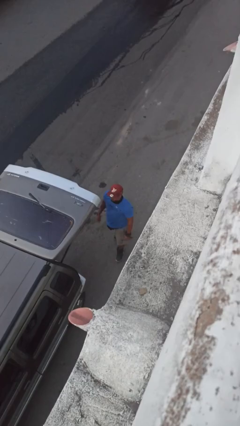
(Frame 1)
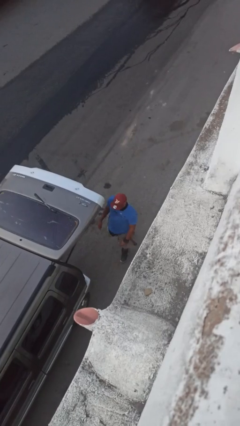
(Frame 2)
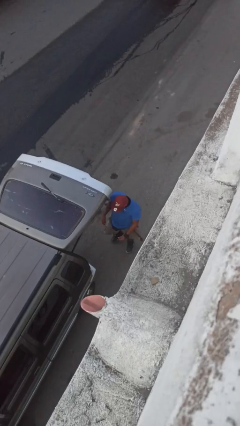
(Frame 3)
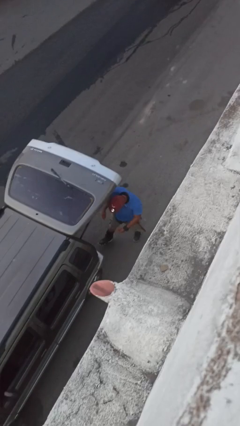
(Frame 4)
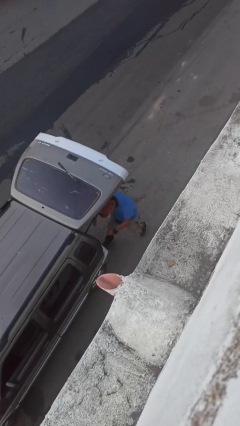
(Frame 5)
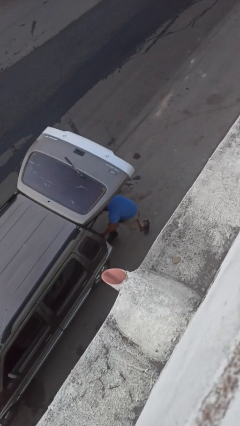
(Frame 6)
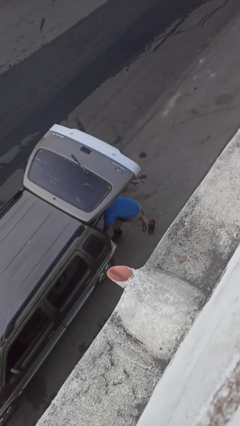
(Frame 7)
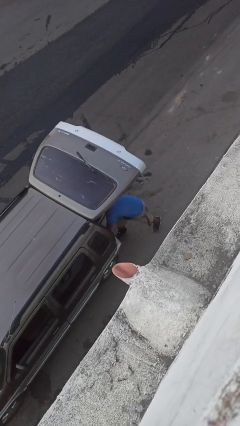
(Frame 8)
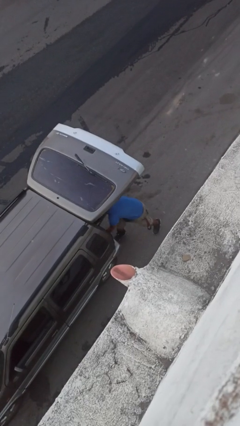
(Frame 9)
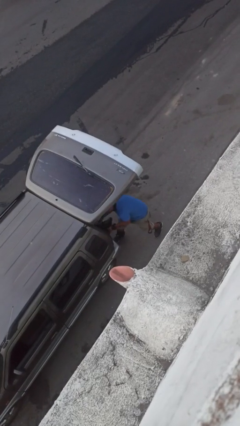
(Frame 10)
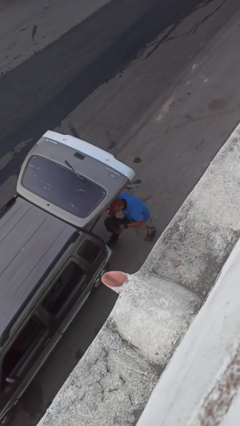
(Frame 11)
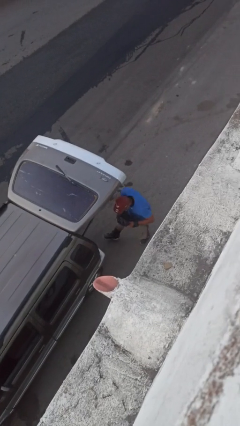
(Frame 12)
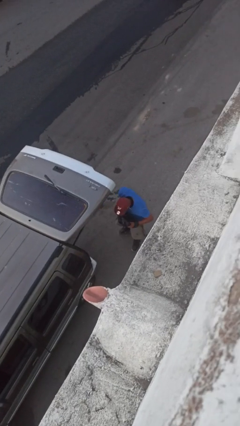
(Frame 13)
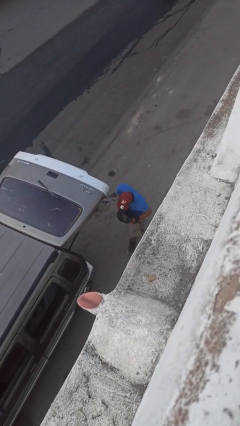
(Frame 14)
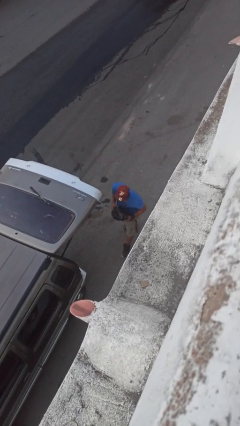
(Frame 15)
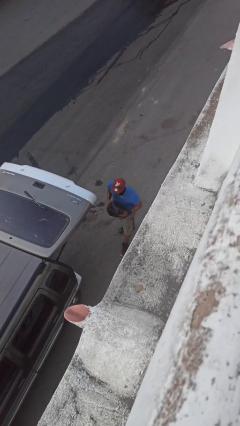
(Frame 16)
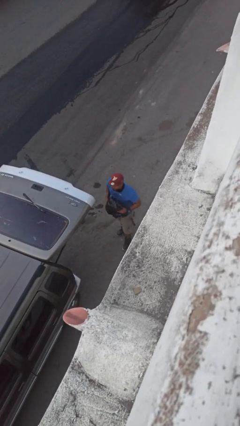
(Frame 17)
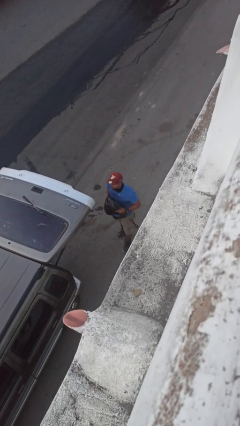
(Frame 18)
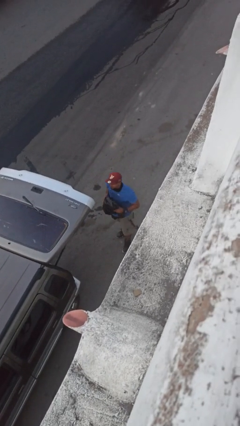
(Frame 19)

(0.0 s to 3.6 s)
person unloads car

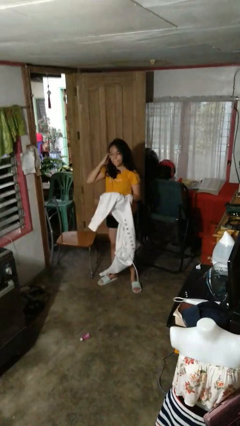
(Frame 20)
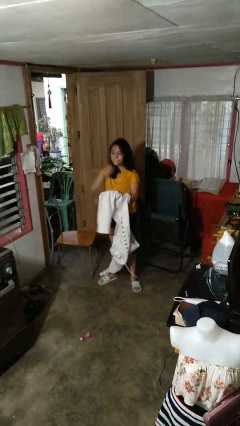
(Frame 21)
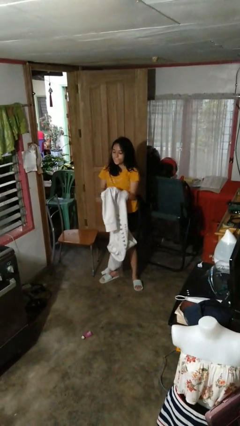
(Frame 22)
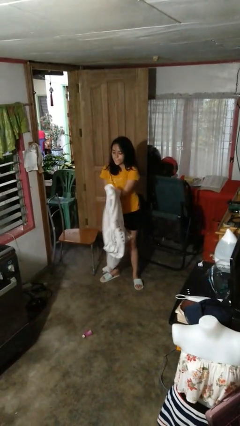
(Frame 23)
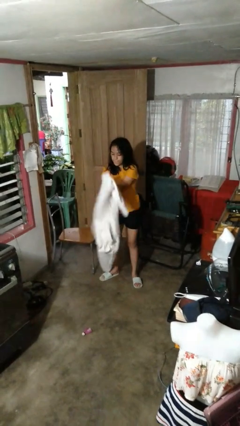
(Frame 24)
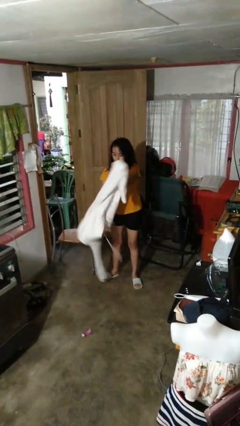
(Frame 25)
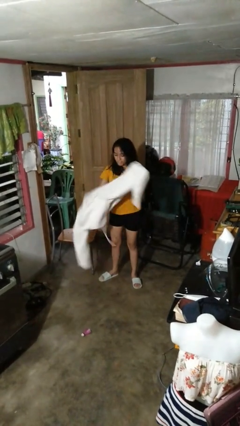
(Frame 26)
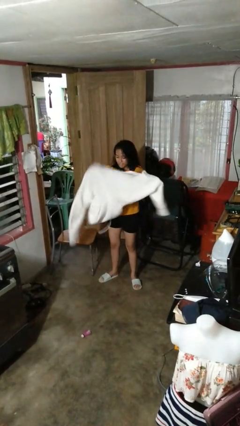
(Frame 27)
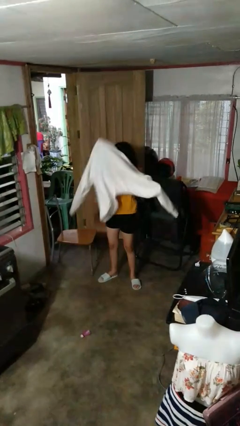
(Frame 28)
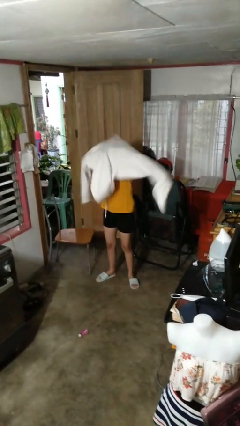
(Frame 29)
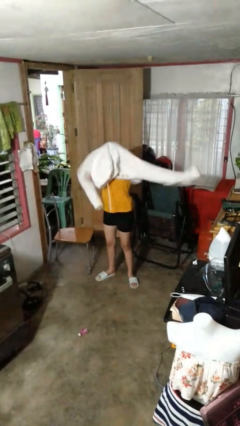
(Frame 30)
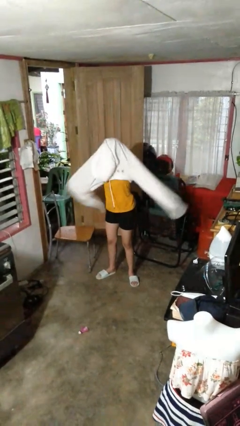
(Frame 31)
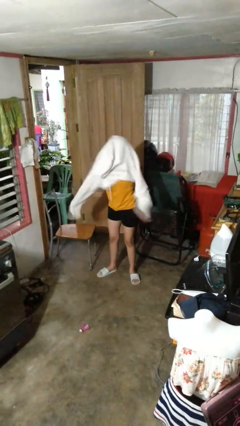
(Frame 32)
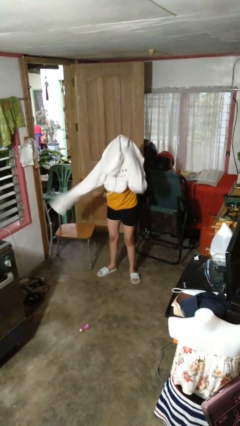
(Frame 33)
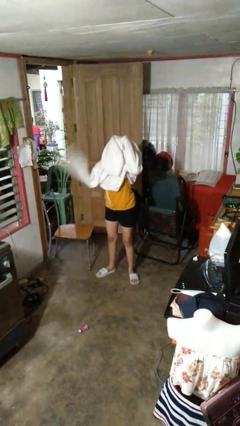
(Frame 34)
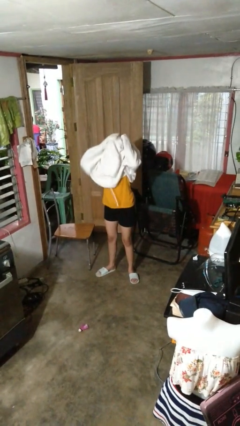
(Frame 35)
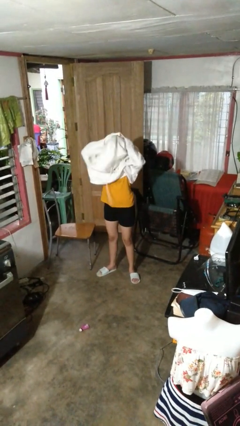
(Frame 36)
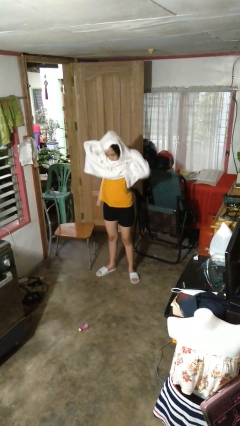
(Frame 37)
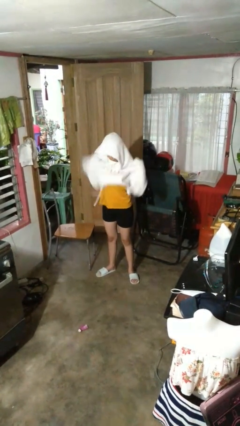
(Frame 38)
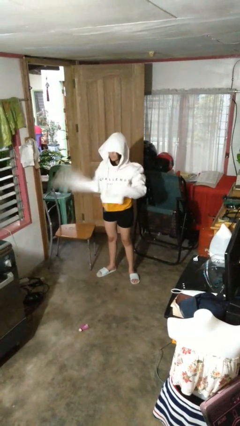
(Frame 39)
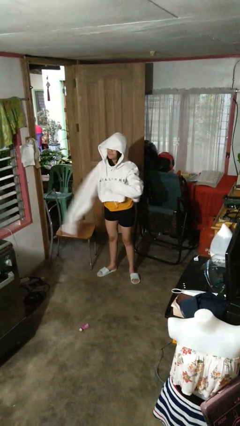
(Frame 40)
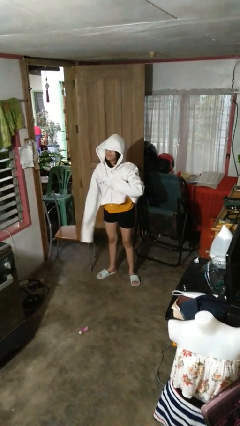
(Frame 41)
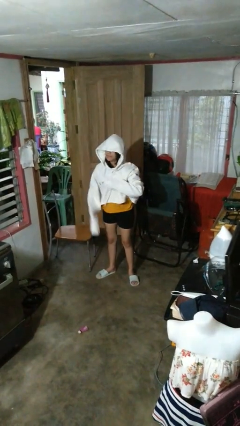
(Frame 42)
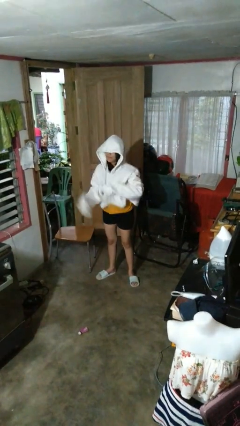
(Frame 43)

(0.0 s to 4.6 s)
person puts on hoodie

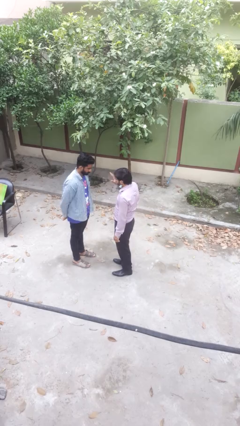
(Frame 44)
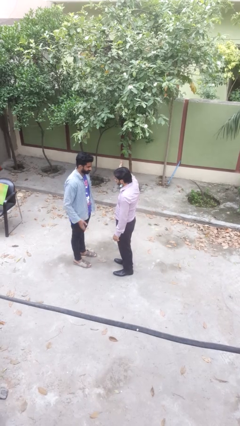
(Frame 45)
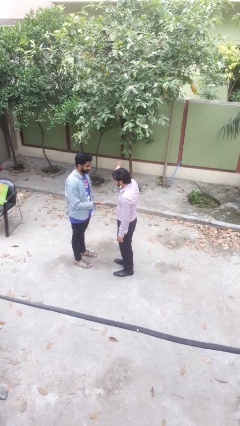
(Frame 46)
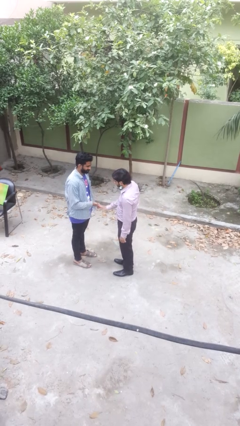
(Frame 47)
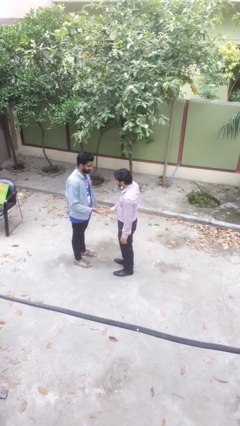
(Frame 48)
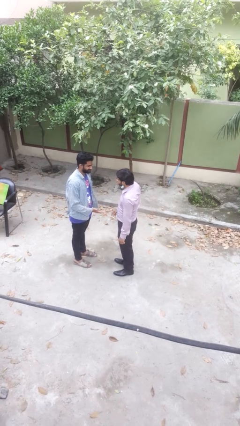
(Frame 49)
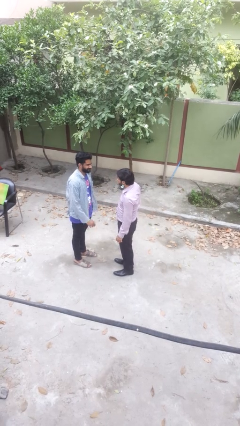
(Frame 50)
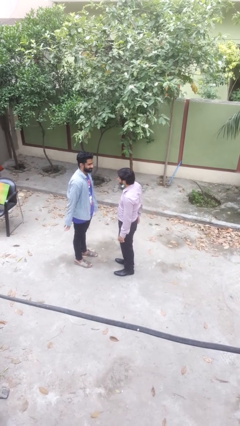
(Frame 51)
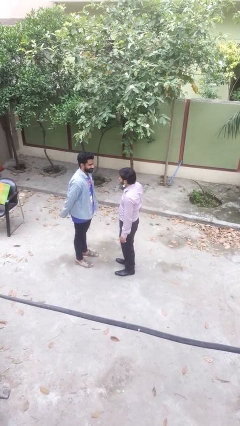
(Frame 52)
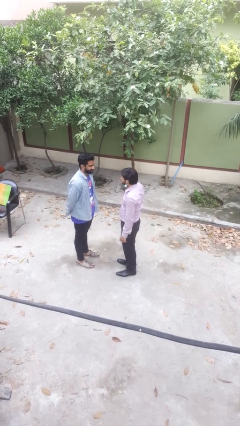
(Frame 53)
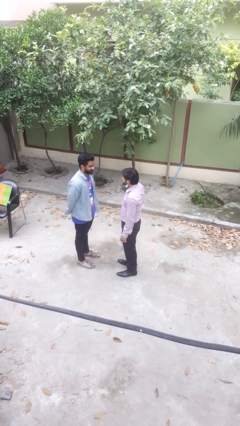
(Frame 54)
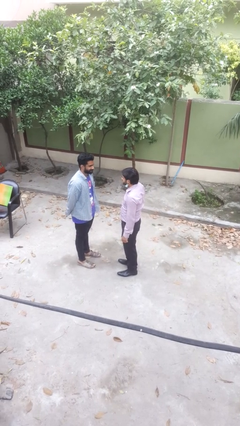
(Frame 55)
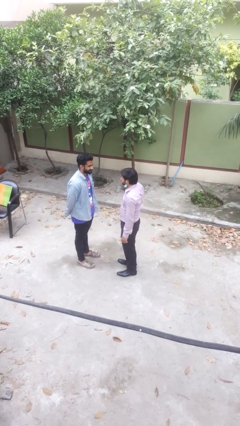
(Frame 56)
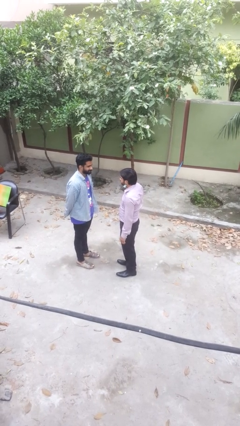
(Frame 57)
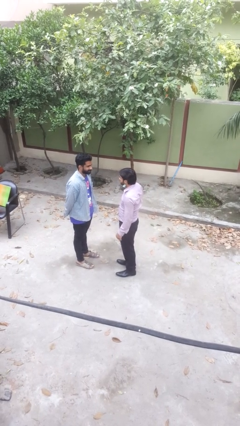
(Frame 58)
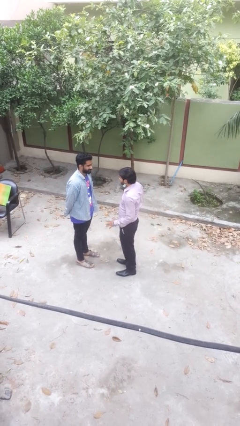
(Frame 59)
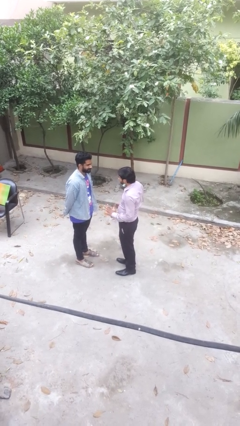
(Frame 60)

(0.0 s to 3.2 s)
person highfives hand

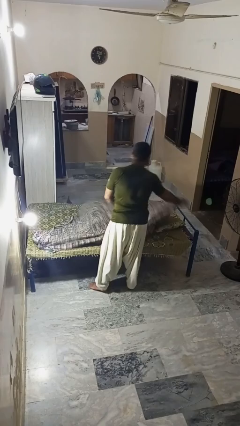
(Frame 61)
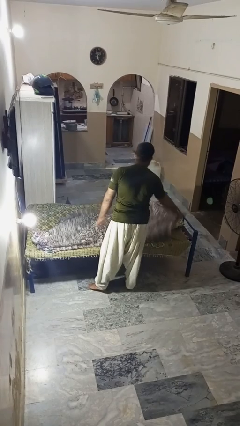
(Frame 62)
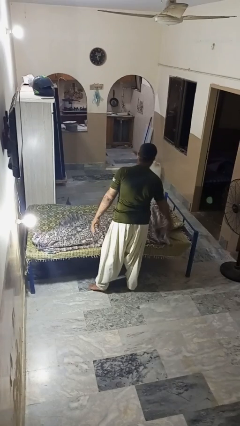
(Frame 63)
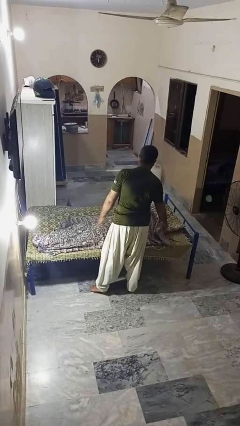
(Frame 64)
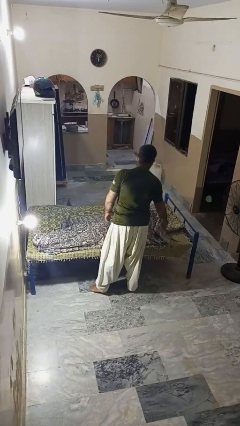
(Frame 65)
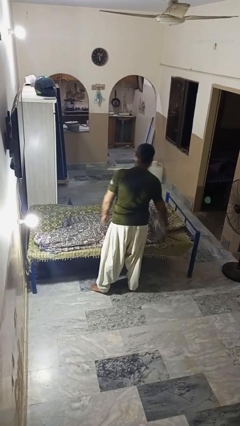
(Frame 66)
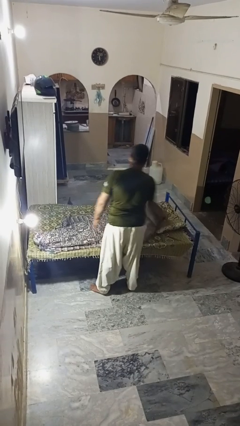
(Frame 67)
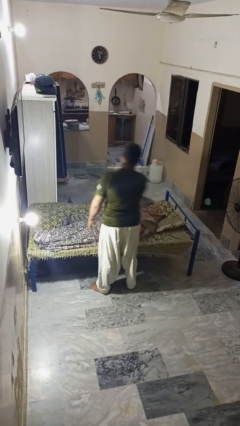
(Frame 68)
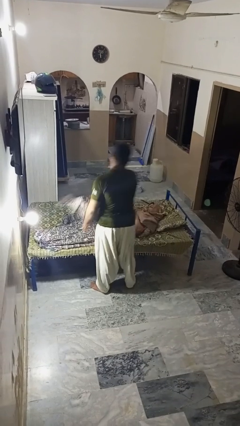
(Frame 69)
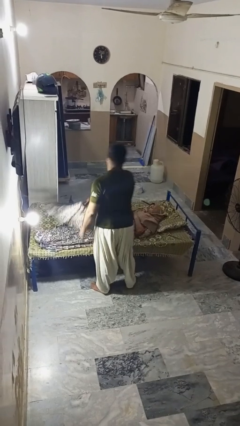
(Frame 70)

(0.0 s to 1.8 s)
person uncovers friend with blanket

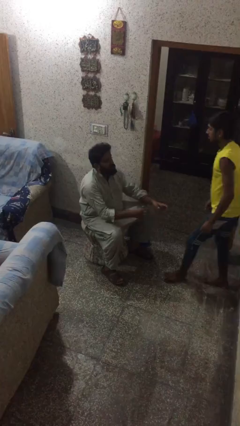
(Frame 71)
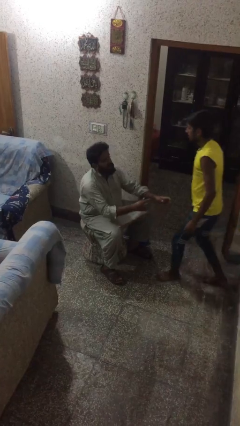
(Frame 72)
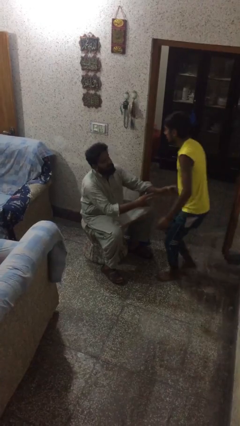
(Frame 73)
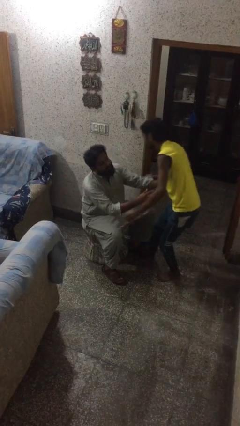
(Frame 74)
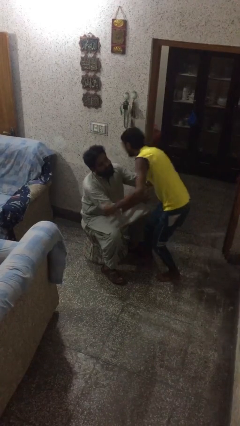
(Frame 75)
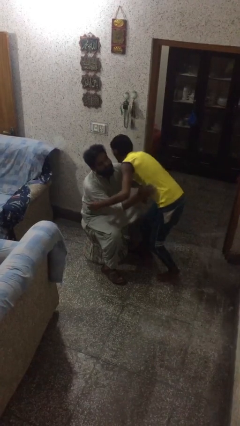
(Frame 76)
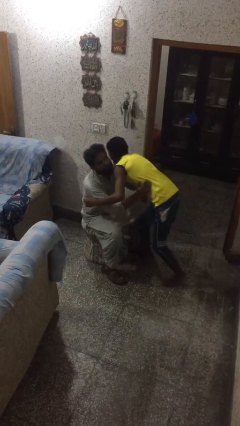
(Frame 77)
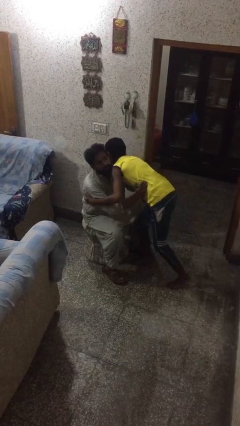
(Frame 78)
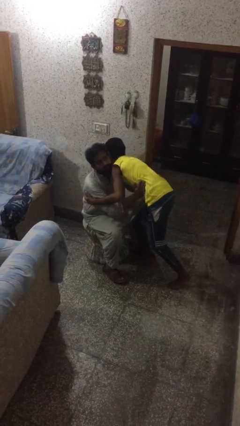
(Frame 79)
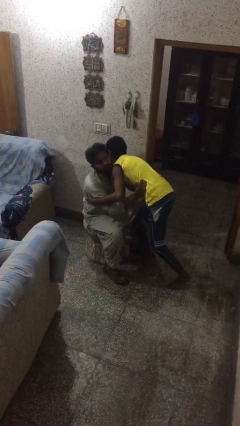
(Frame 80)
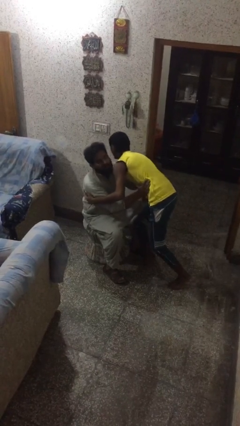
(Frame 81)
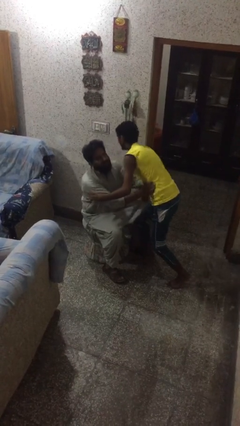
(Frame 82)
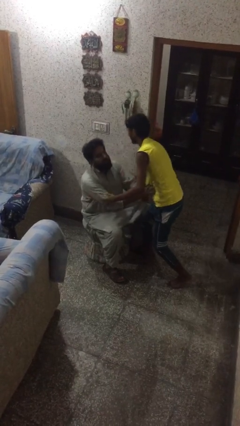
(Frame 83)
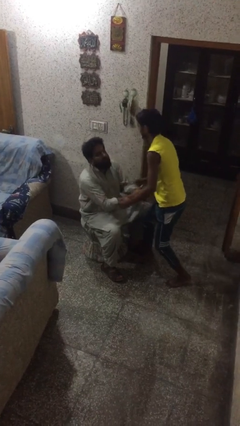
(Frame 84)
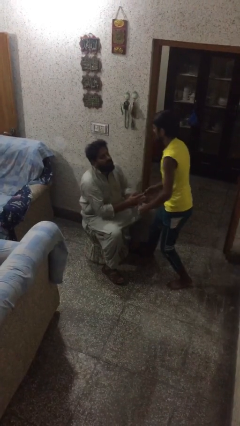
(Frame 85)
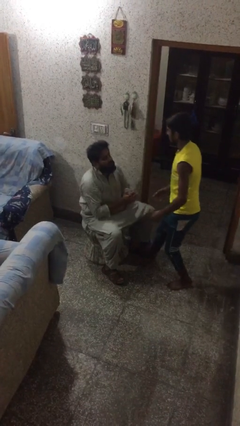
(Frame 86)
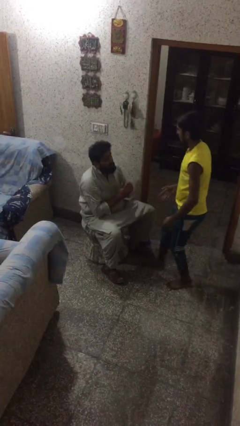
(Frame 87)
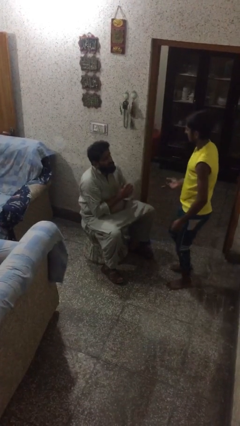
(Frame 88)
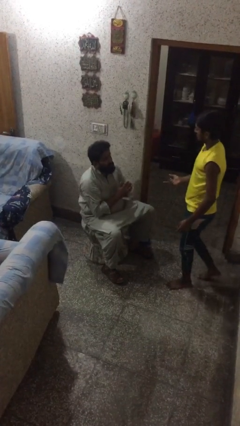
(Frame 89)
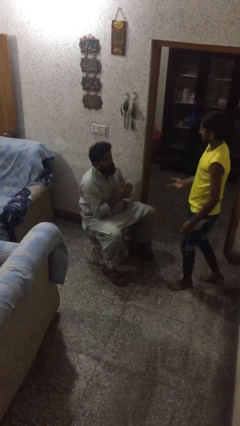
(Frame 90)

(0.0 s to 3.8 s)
person embraces person

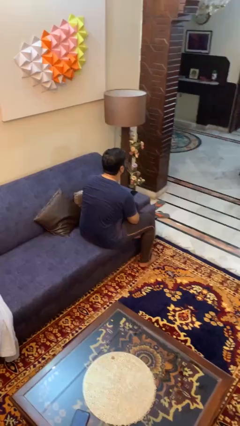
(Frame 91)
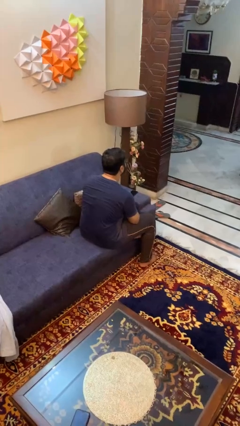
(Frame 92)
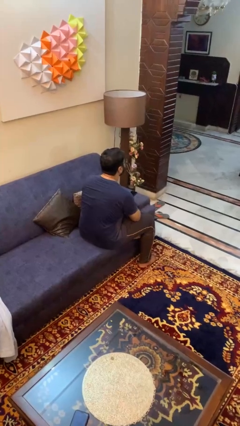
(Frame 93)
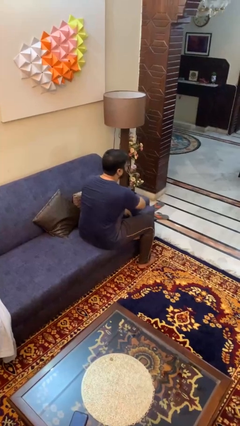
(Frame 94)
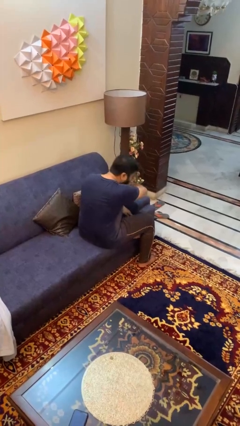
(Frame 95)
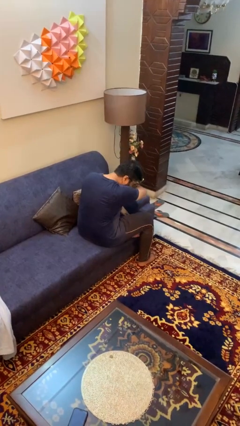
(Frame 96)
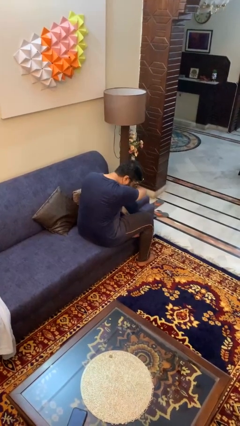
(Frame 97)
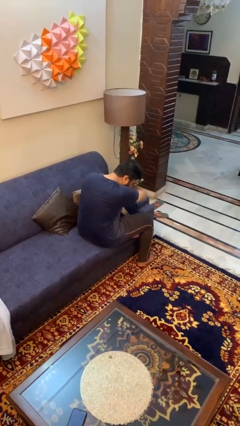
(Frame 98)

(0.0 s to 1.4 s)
person sneezes into arm
